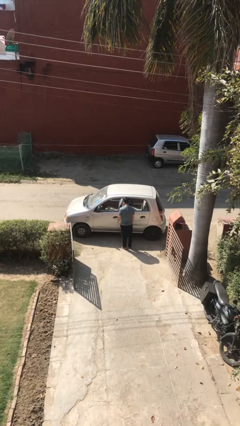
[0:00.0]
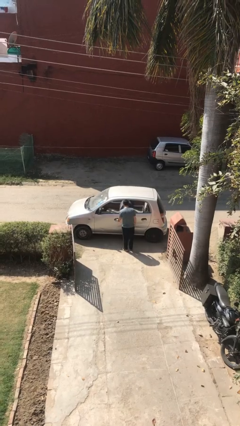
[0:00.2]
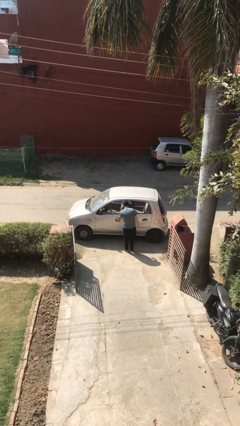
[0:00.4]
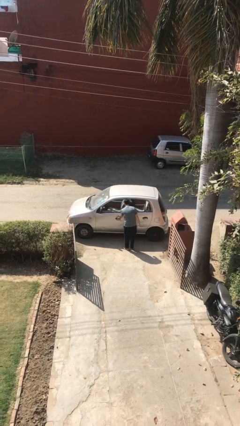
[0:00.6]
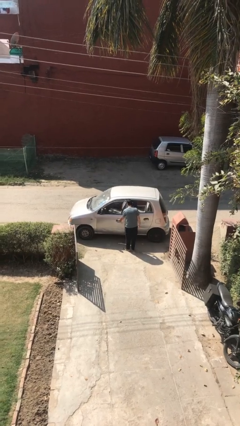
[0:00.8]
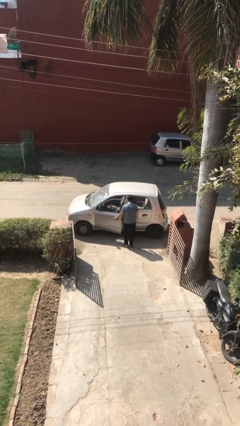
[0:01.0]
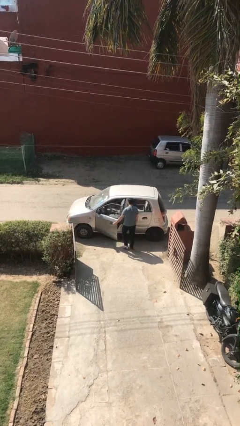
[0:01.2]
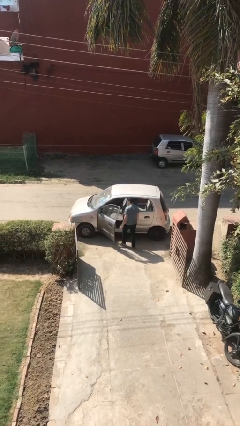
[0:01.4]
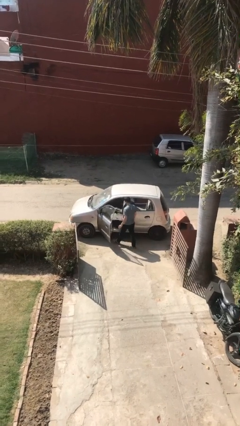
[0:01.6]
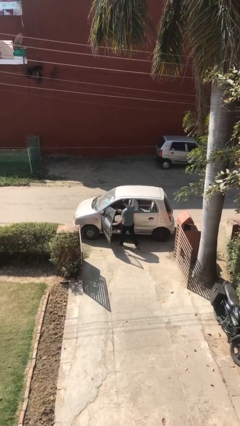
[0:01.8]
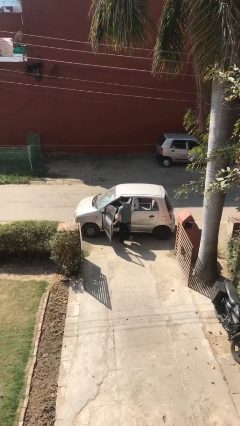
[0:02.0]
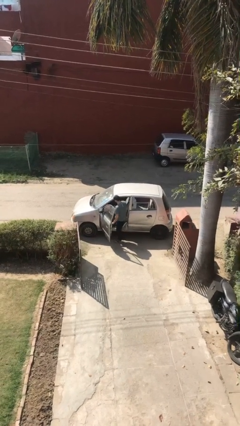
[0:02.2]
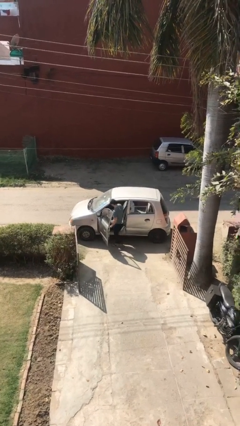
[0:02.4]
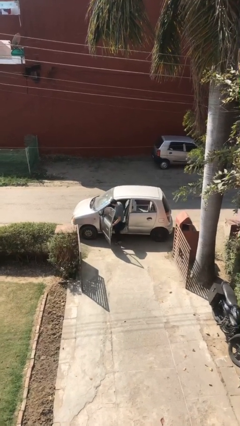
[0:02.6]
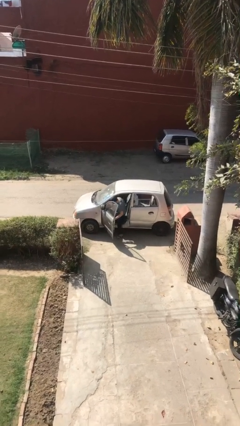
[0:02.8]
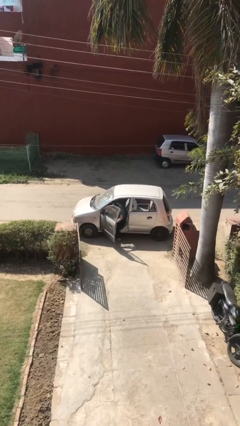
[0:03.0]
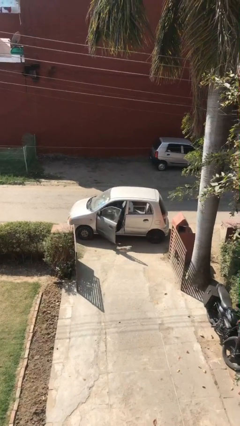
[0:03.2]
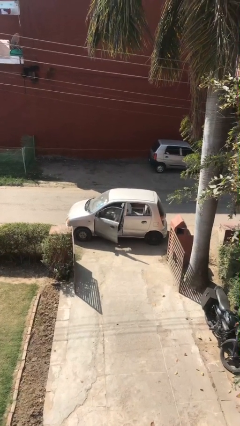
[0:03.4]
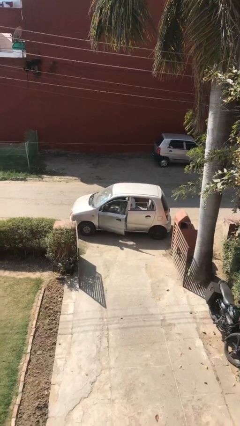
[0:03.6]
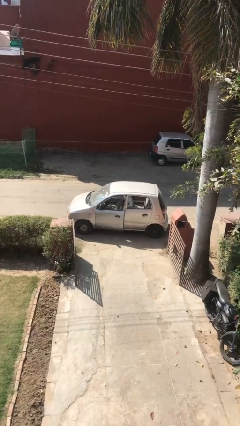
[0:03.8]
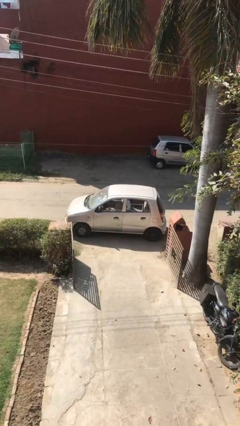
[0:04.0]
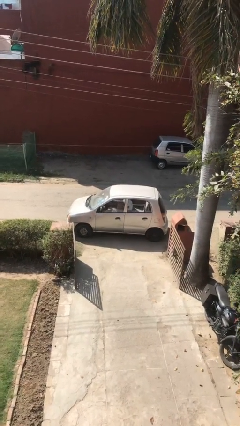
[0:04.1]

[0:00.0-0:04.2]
car picks up person

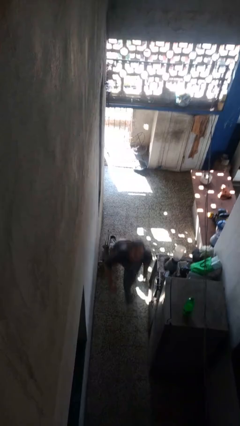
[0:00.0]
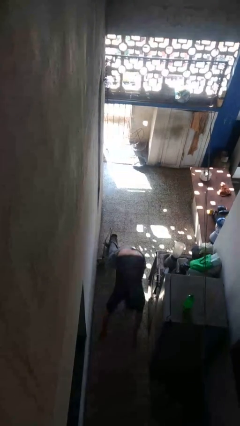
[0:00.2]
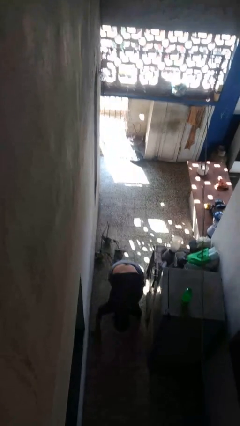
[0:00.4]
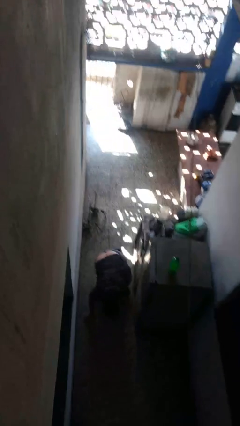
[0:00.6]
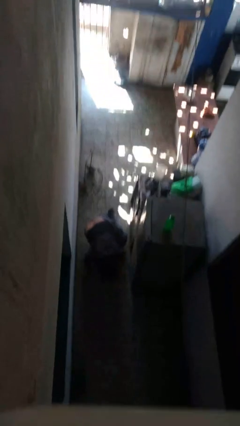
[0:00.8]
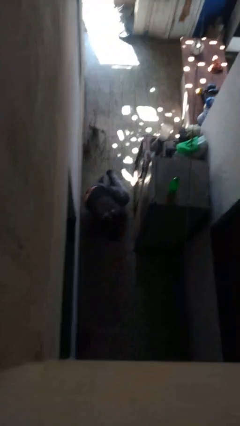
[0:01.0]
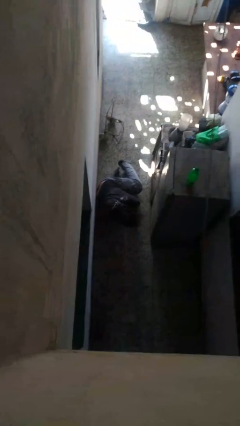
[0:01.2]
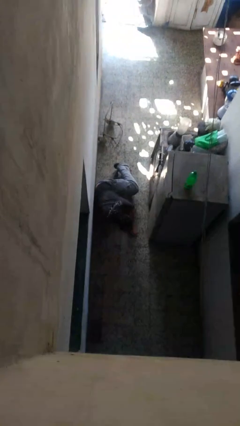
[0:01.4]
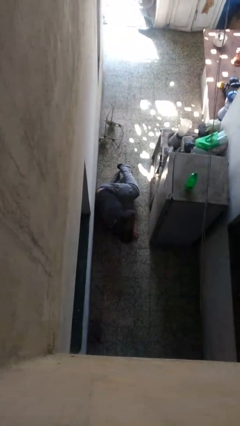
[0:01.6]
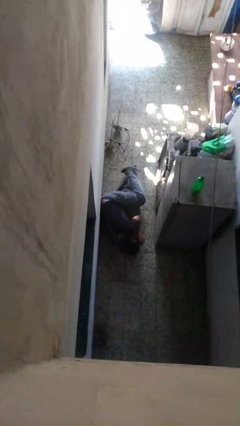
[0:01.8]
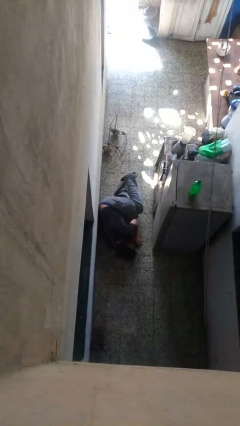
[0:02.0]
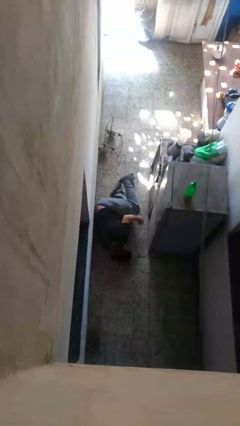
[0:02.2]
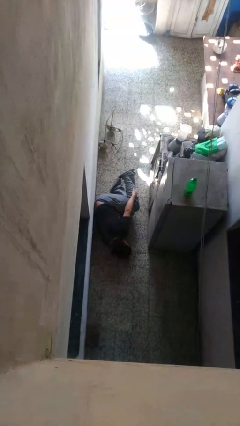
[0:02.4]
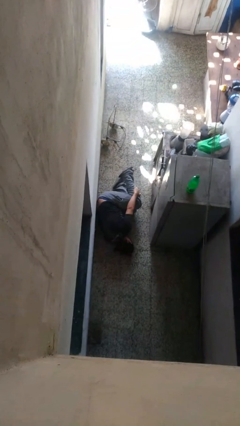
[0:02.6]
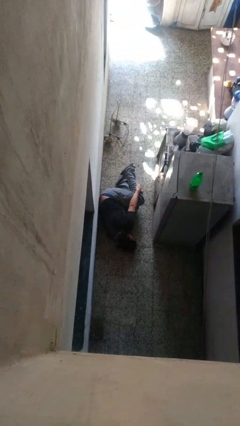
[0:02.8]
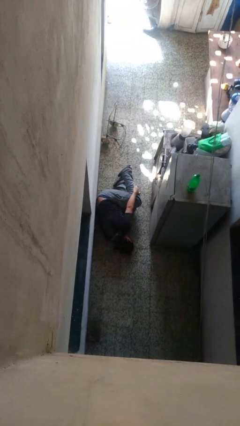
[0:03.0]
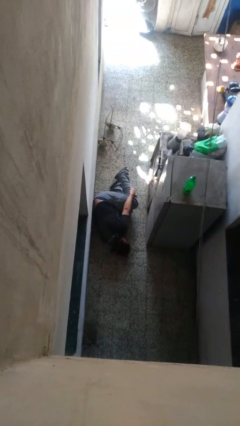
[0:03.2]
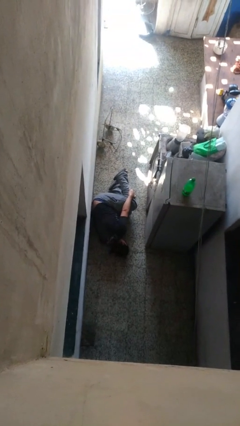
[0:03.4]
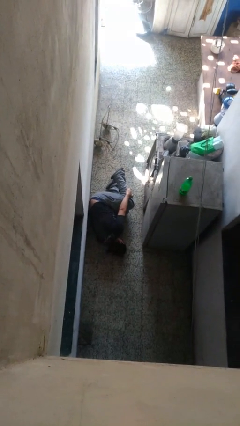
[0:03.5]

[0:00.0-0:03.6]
person trips on object on floor

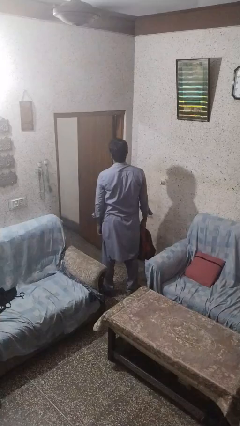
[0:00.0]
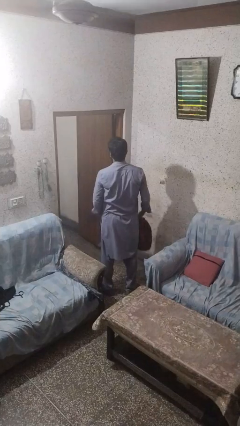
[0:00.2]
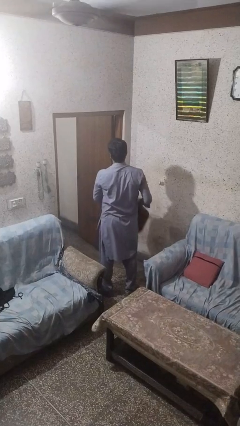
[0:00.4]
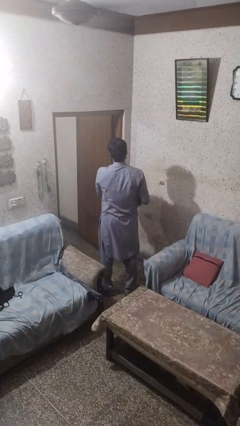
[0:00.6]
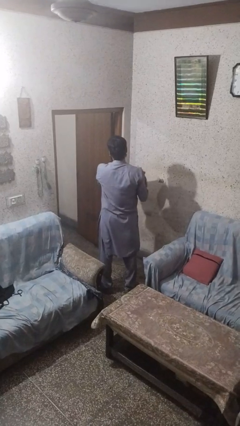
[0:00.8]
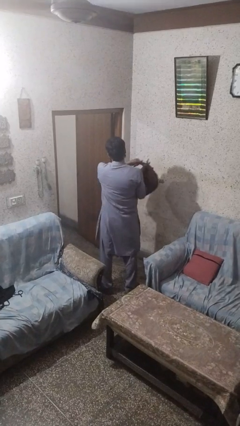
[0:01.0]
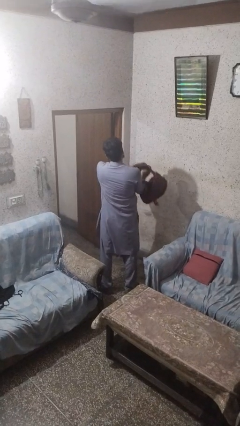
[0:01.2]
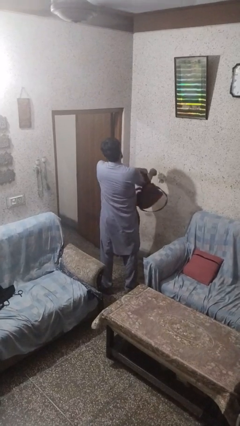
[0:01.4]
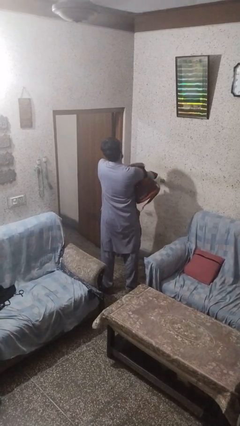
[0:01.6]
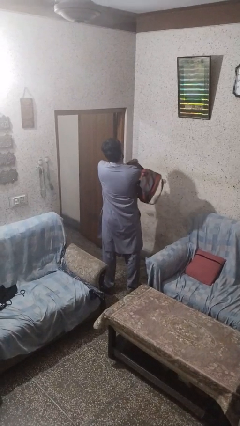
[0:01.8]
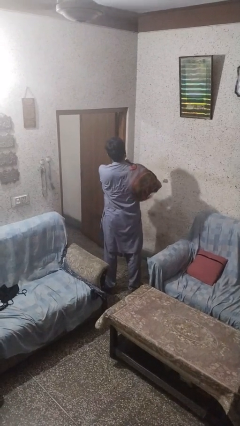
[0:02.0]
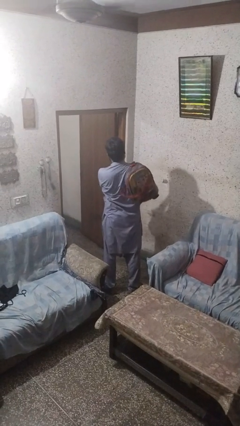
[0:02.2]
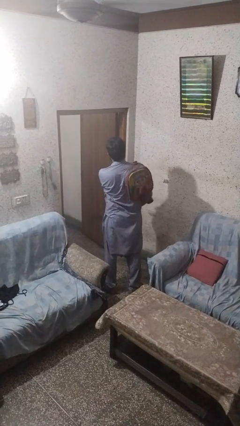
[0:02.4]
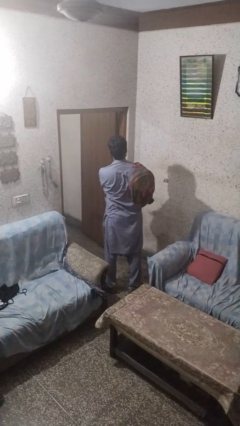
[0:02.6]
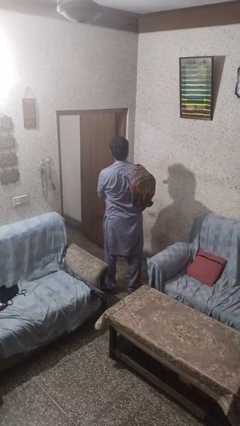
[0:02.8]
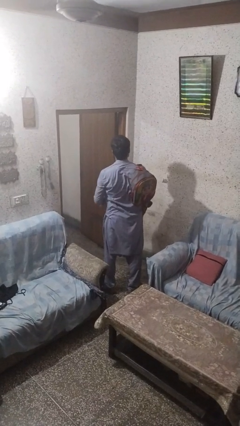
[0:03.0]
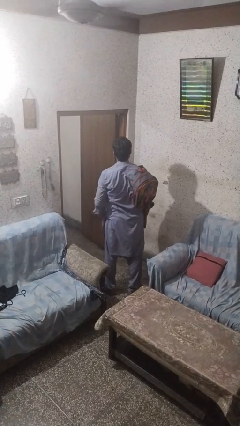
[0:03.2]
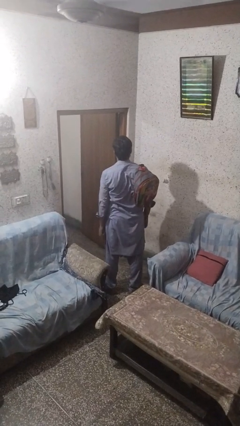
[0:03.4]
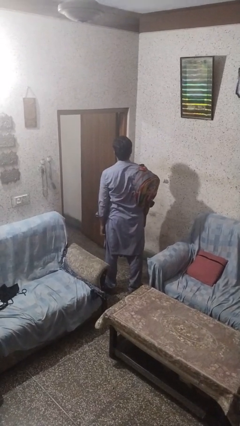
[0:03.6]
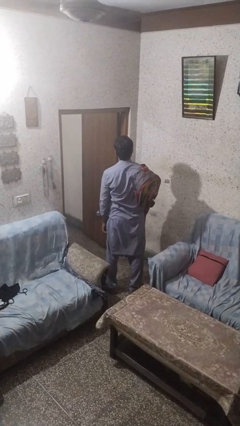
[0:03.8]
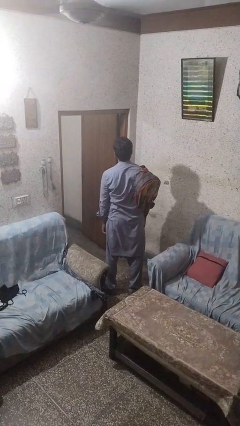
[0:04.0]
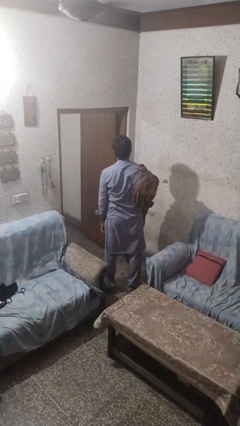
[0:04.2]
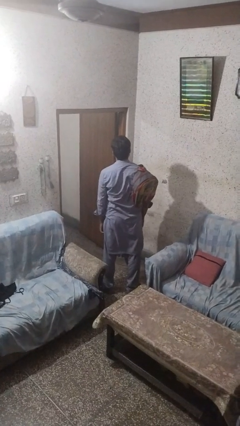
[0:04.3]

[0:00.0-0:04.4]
person puts on backpack

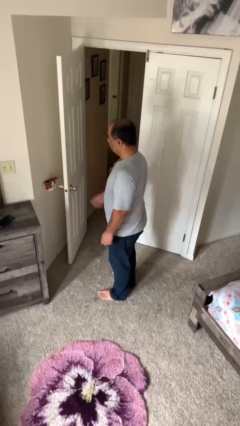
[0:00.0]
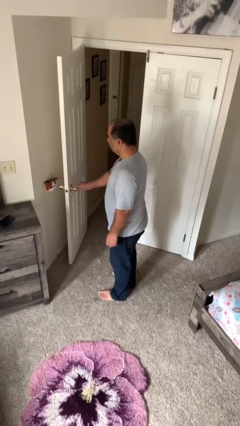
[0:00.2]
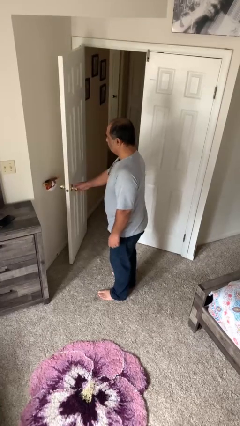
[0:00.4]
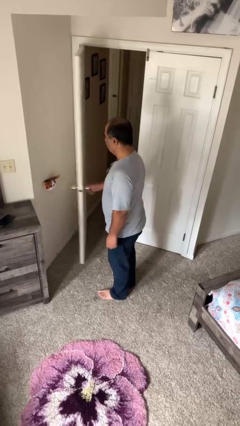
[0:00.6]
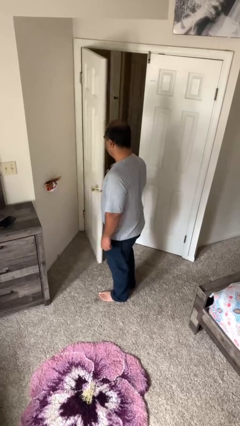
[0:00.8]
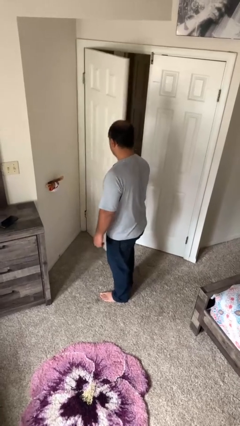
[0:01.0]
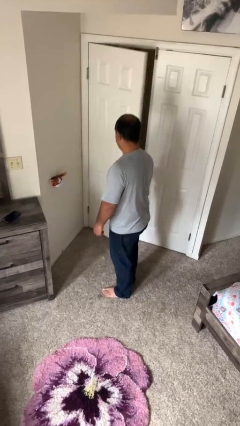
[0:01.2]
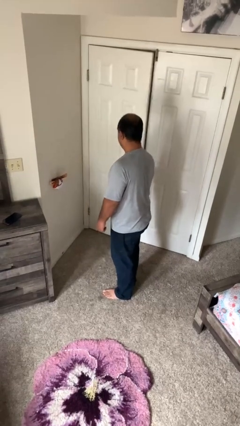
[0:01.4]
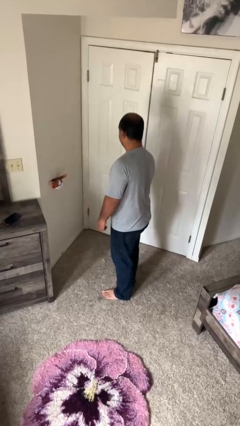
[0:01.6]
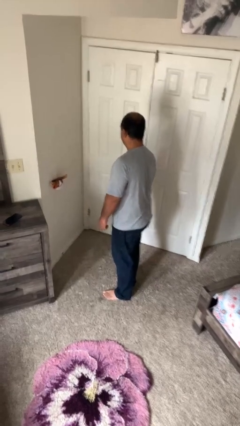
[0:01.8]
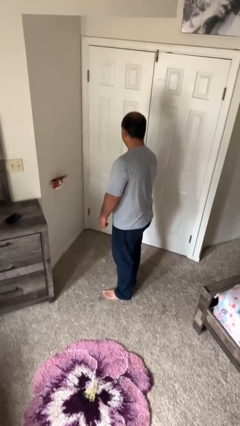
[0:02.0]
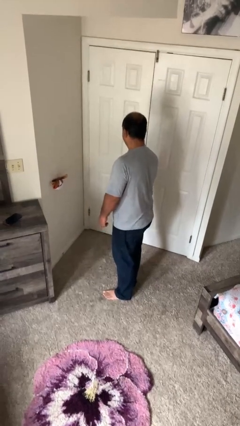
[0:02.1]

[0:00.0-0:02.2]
person closes facility door

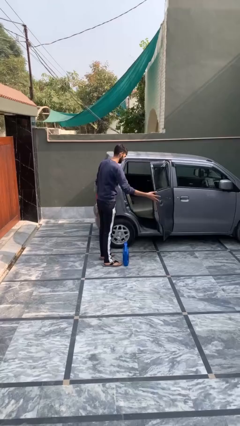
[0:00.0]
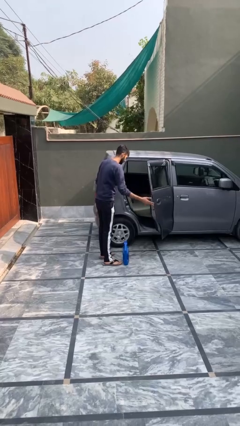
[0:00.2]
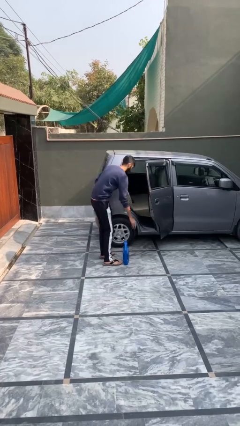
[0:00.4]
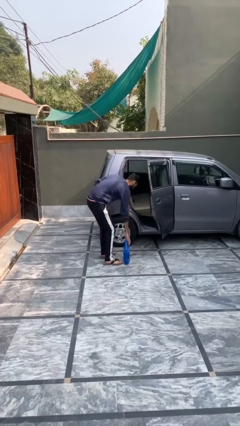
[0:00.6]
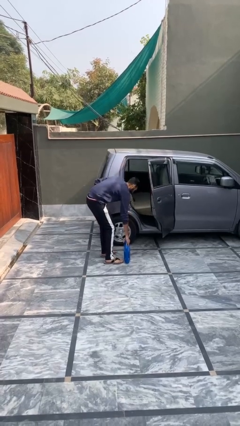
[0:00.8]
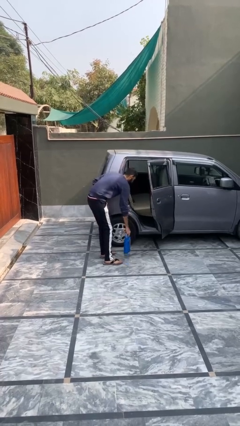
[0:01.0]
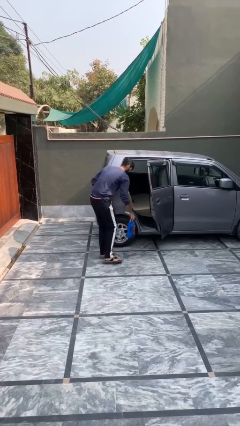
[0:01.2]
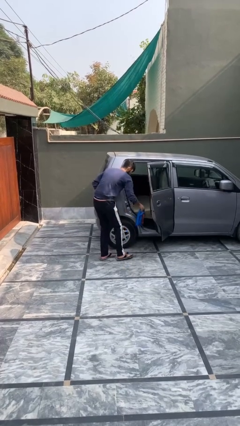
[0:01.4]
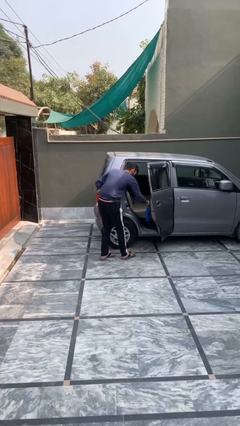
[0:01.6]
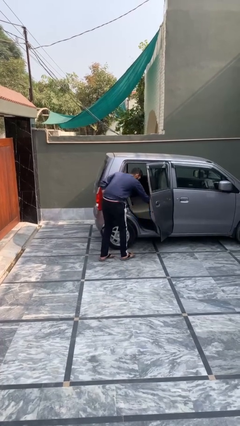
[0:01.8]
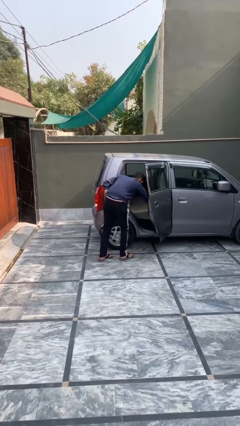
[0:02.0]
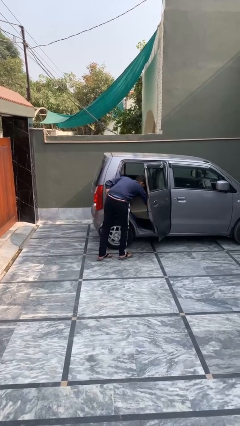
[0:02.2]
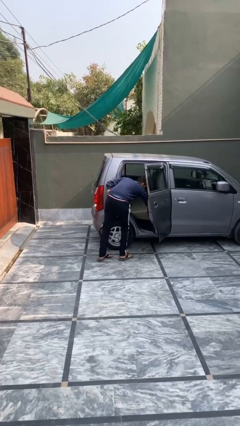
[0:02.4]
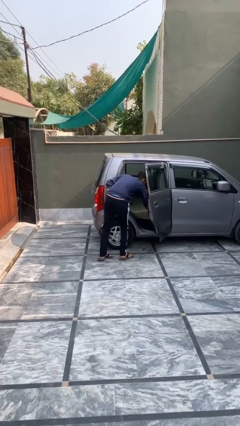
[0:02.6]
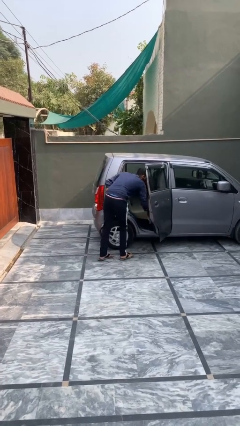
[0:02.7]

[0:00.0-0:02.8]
person loads car

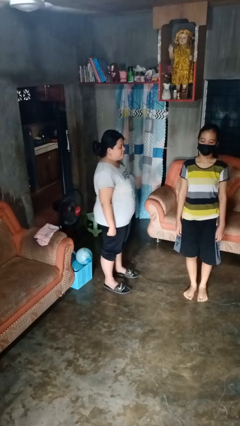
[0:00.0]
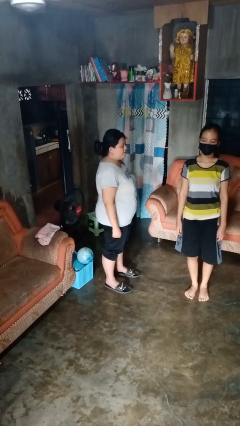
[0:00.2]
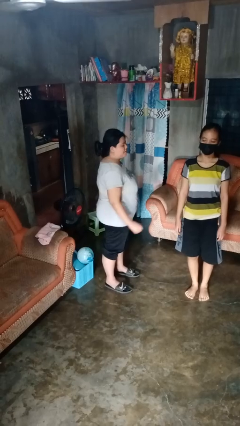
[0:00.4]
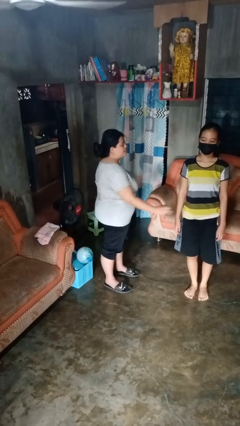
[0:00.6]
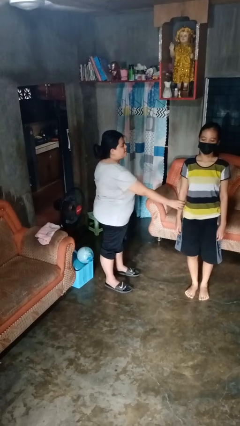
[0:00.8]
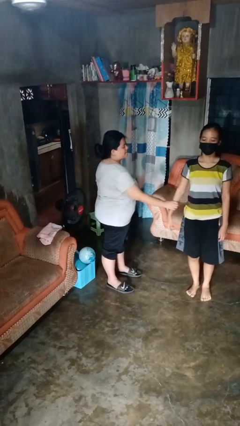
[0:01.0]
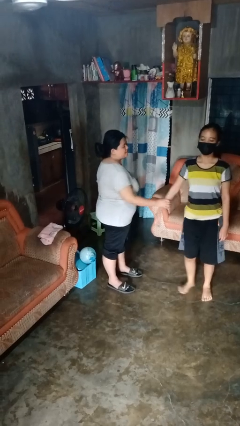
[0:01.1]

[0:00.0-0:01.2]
person grabs person by forearm
